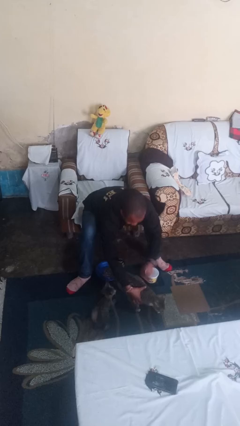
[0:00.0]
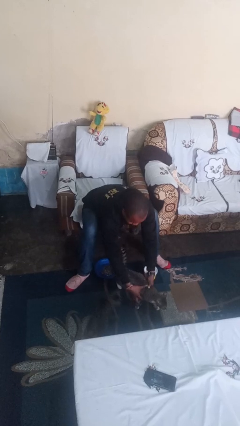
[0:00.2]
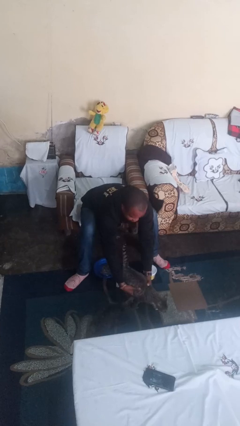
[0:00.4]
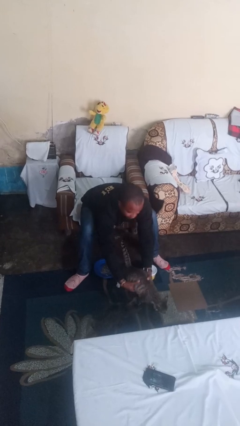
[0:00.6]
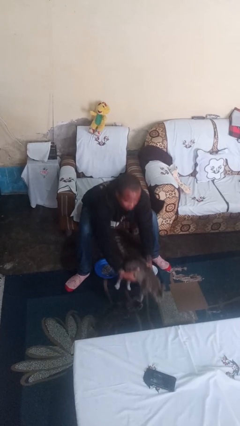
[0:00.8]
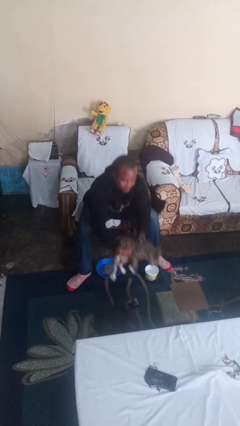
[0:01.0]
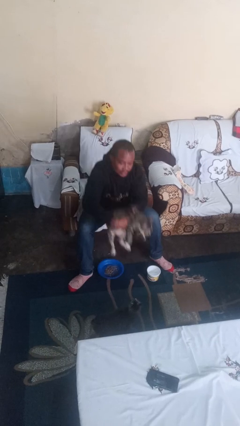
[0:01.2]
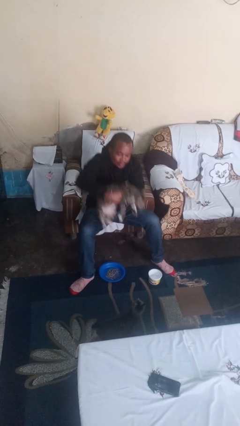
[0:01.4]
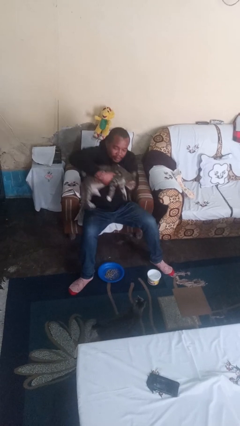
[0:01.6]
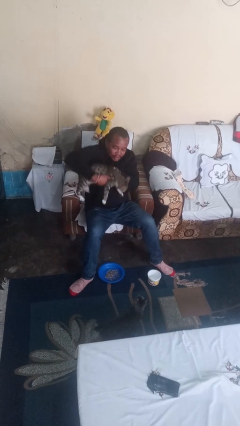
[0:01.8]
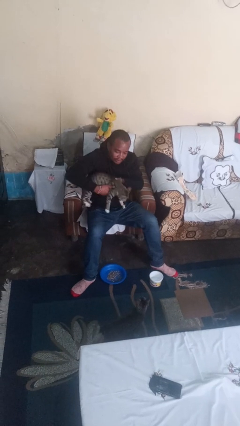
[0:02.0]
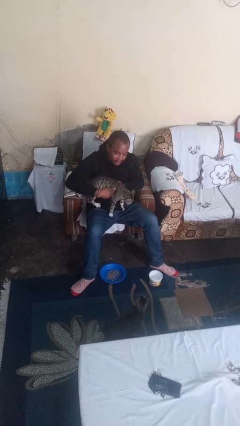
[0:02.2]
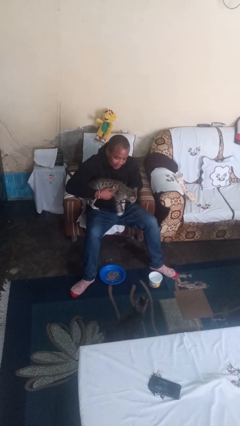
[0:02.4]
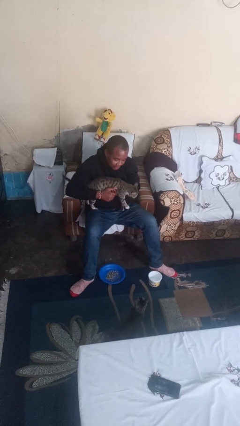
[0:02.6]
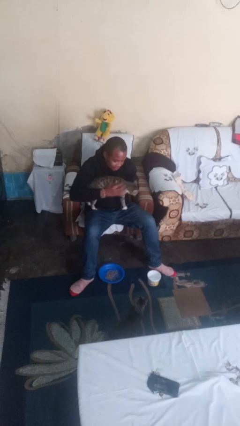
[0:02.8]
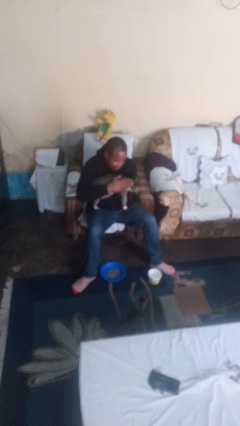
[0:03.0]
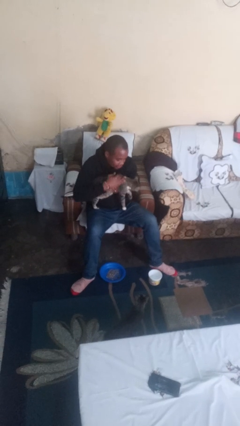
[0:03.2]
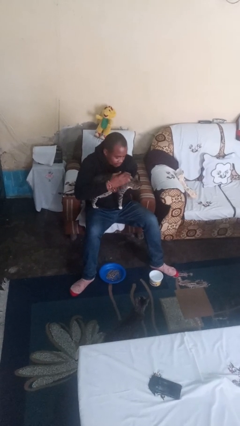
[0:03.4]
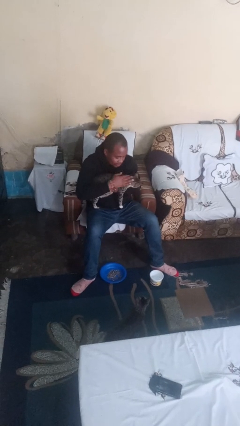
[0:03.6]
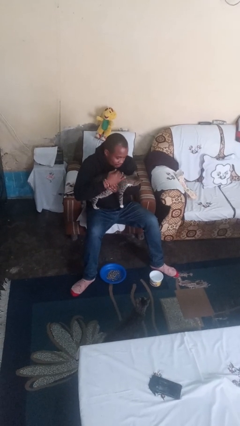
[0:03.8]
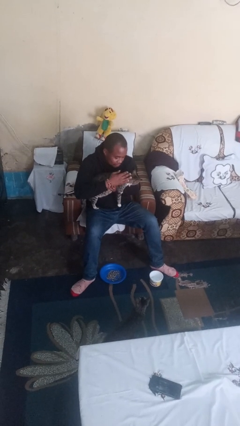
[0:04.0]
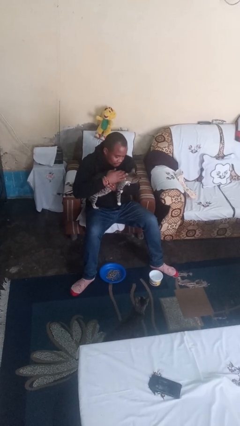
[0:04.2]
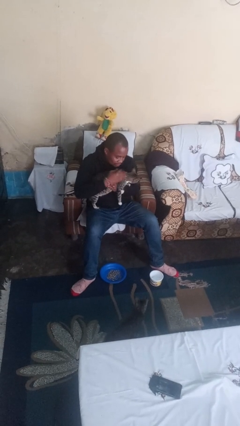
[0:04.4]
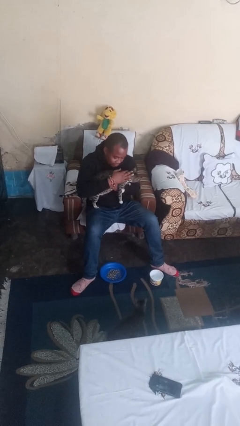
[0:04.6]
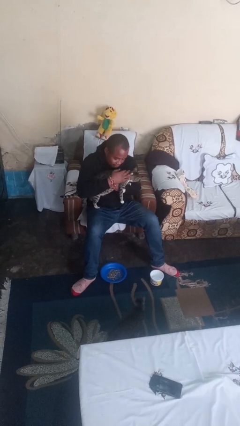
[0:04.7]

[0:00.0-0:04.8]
person hugs cat

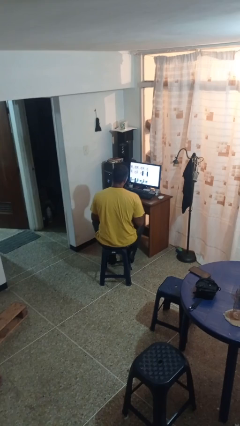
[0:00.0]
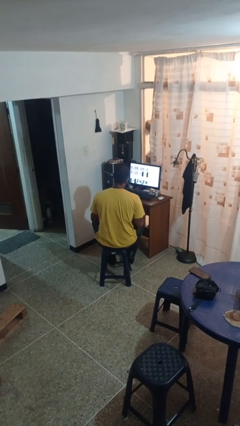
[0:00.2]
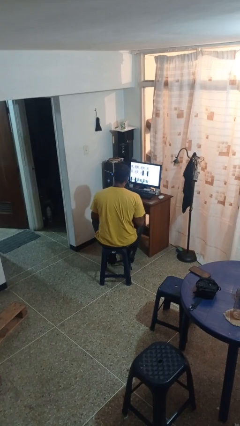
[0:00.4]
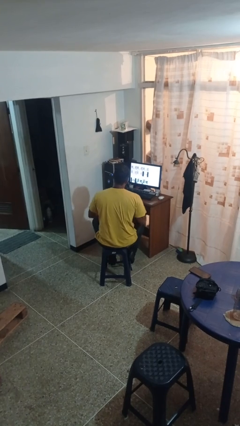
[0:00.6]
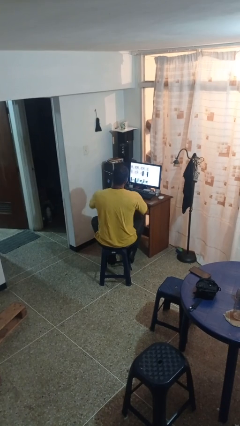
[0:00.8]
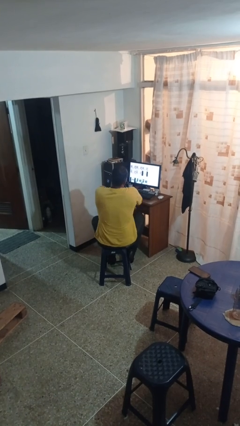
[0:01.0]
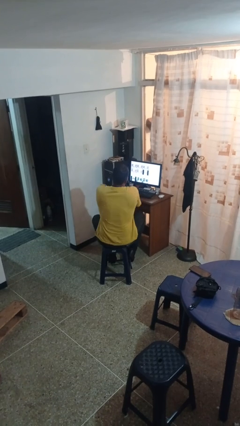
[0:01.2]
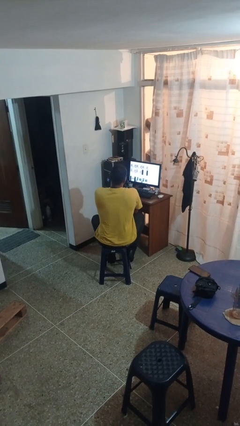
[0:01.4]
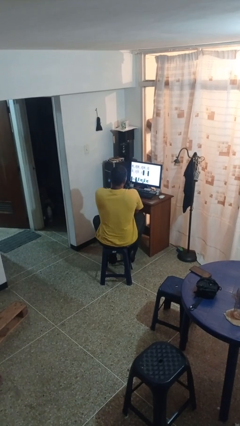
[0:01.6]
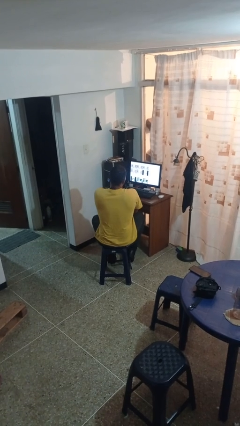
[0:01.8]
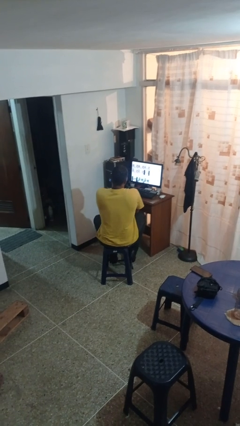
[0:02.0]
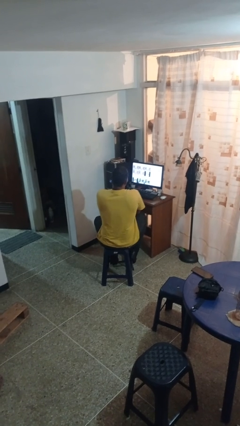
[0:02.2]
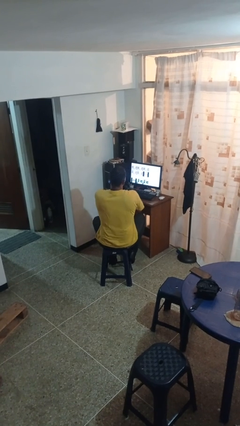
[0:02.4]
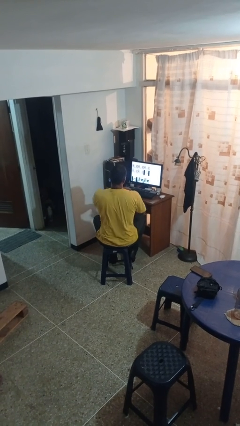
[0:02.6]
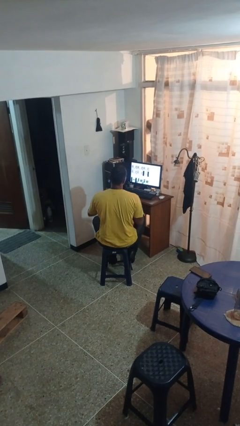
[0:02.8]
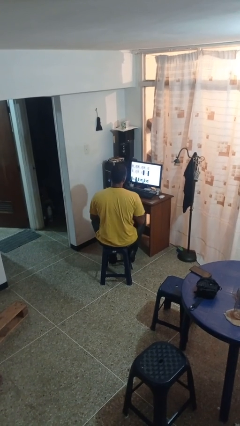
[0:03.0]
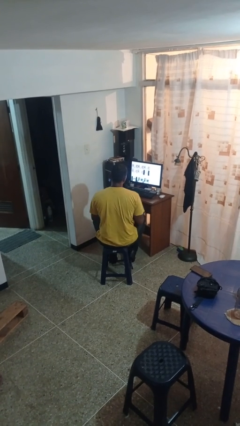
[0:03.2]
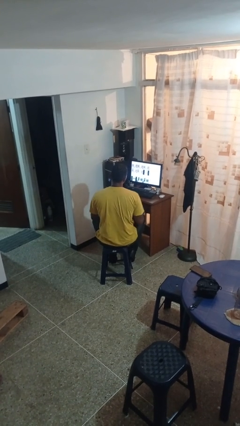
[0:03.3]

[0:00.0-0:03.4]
person crosses arms

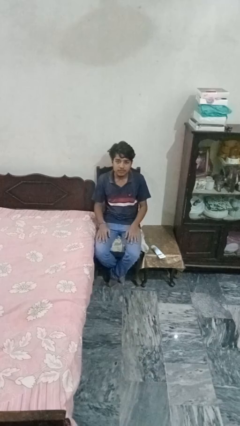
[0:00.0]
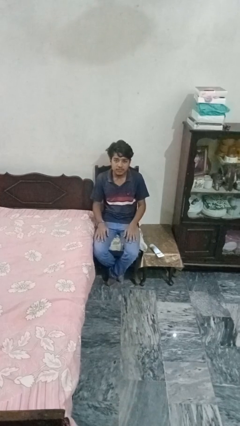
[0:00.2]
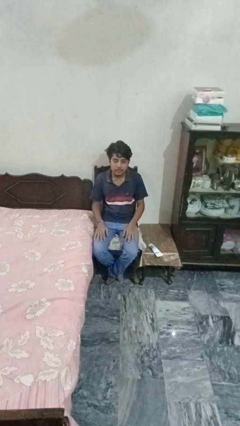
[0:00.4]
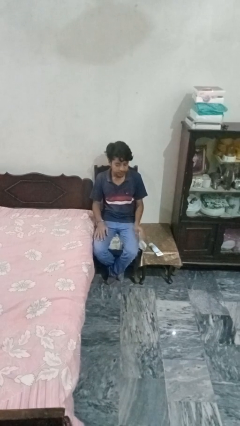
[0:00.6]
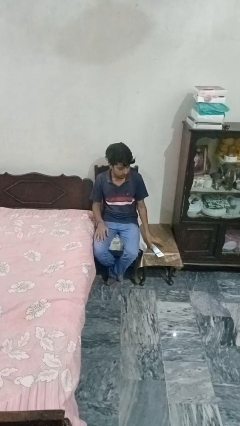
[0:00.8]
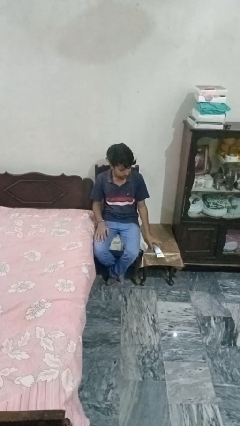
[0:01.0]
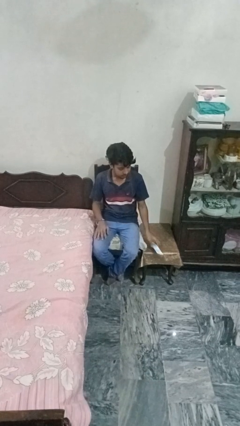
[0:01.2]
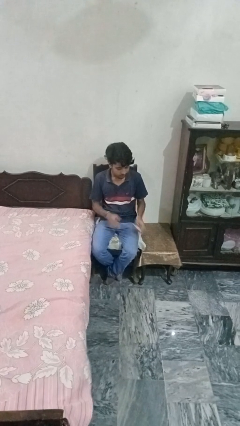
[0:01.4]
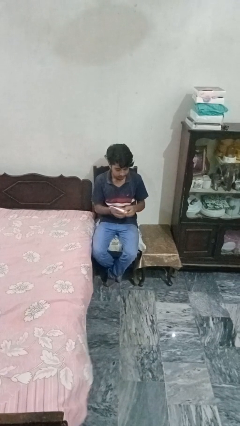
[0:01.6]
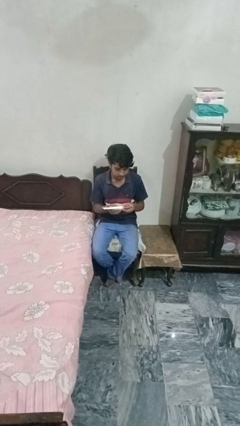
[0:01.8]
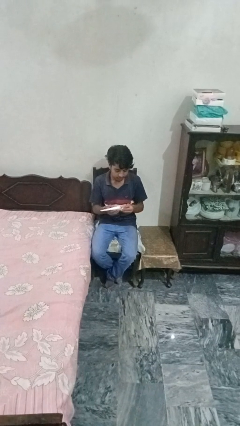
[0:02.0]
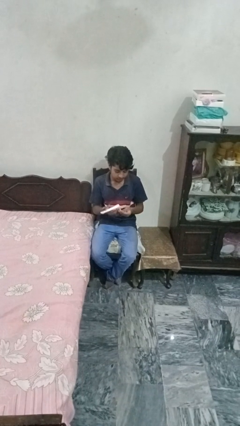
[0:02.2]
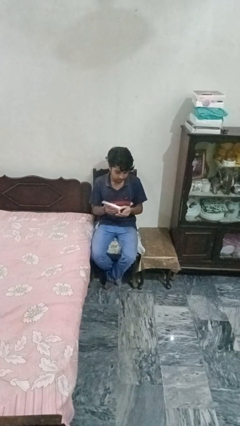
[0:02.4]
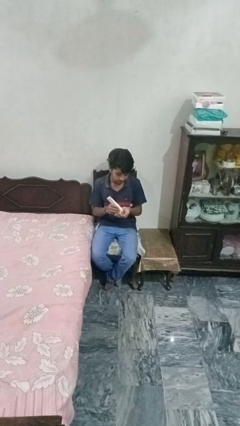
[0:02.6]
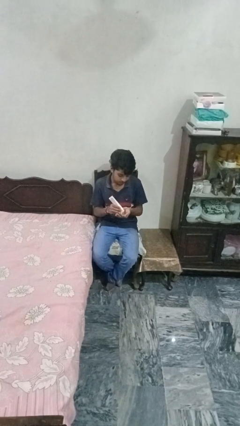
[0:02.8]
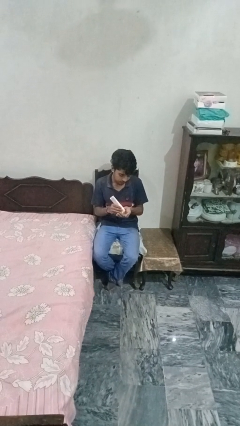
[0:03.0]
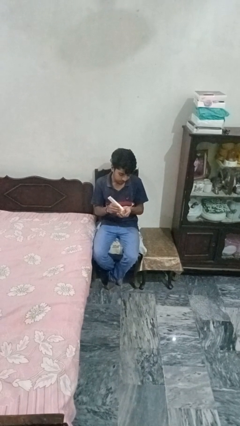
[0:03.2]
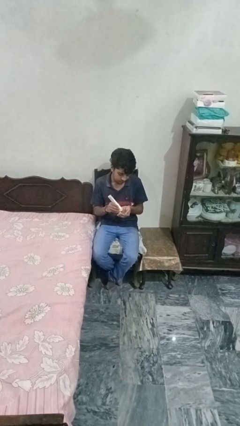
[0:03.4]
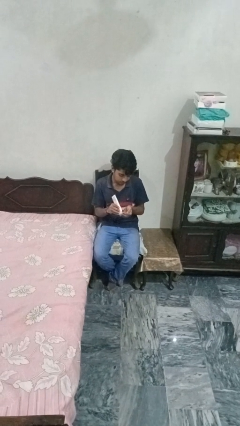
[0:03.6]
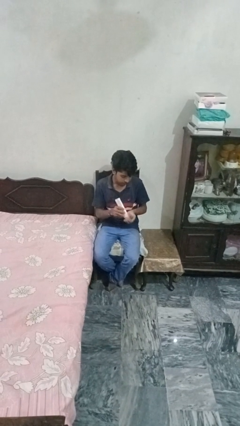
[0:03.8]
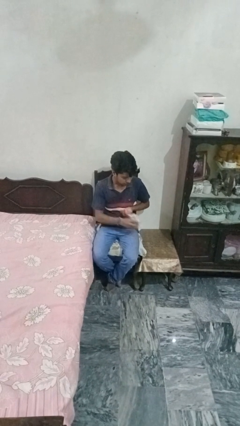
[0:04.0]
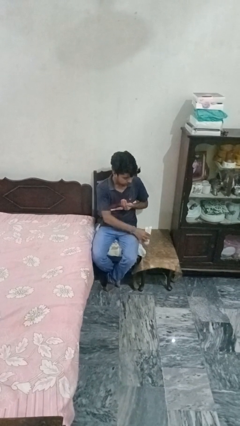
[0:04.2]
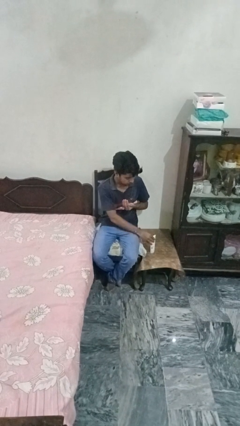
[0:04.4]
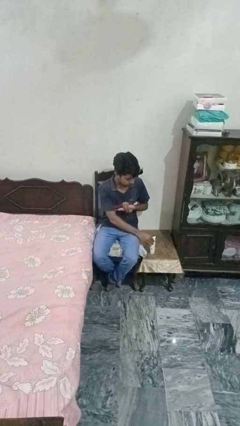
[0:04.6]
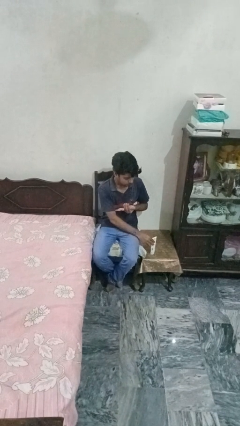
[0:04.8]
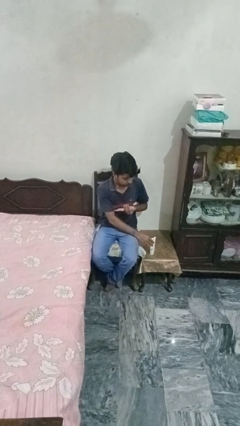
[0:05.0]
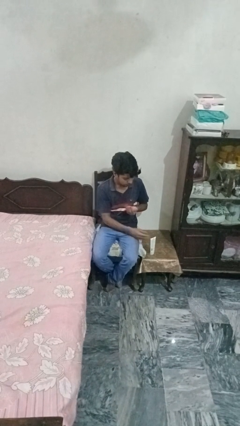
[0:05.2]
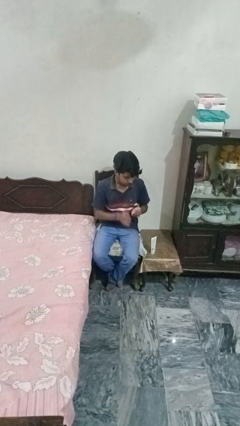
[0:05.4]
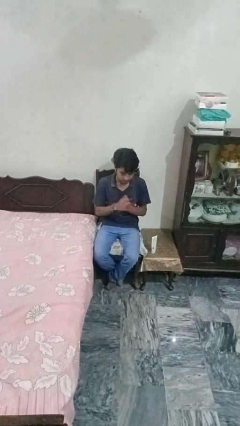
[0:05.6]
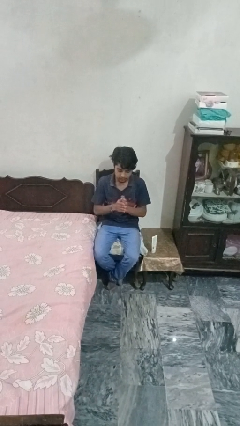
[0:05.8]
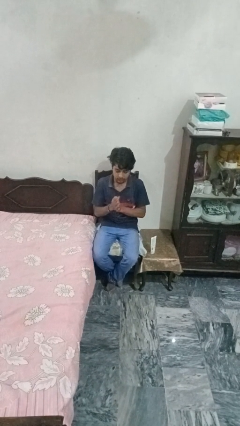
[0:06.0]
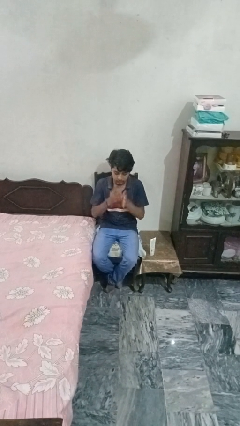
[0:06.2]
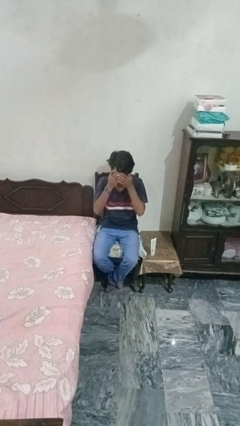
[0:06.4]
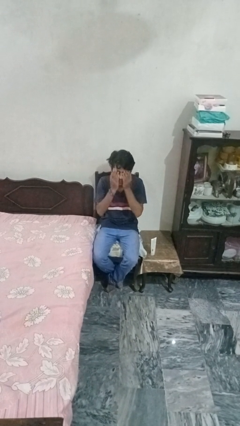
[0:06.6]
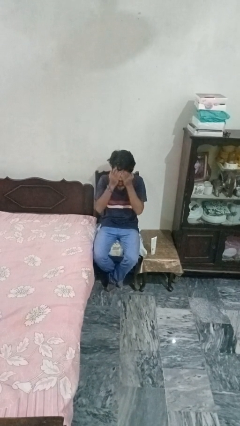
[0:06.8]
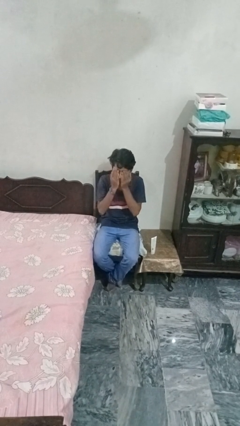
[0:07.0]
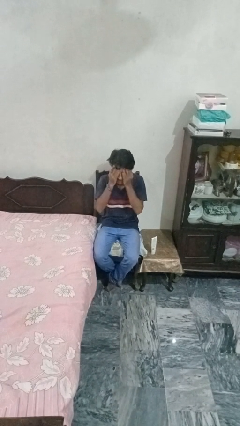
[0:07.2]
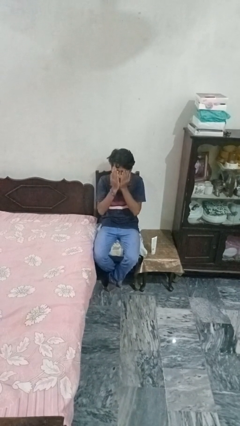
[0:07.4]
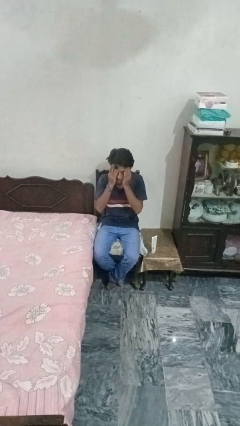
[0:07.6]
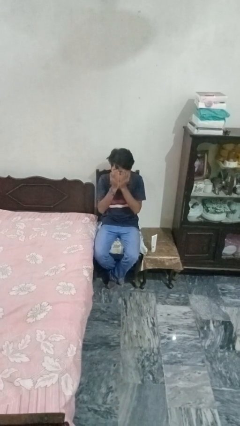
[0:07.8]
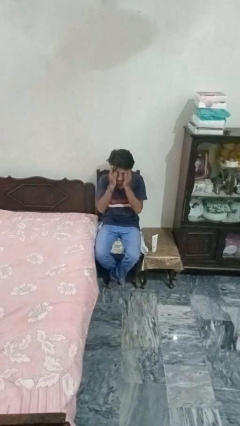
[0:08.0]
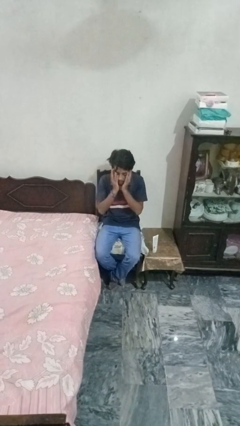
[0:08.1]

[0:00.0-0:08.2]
person applies facial moisturizer

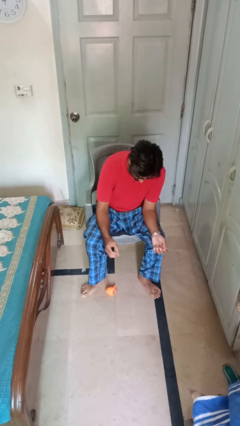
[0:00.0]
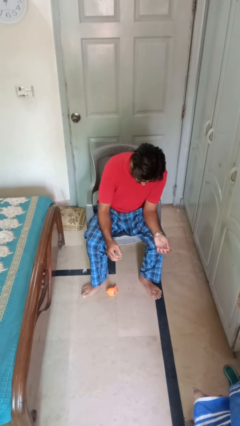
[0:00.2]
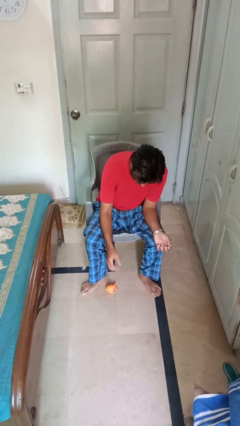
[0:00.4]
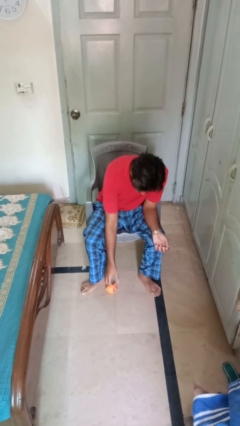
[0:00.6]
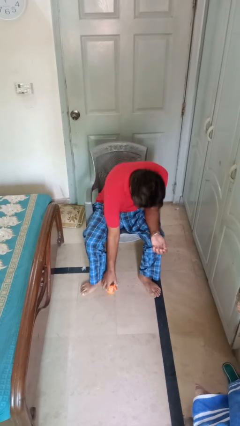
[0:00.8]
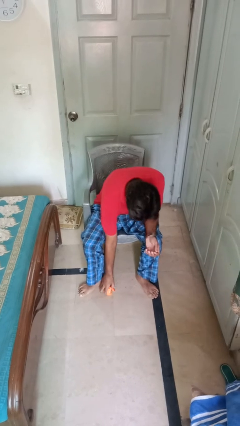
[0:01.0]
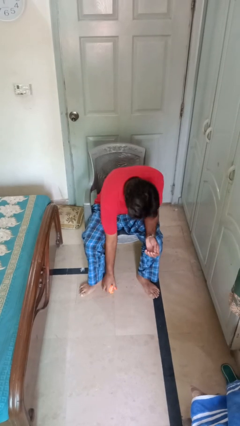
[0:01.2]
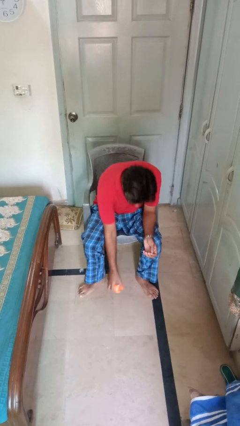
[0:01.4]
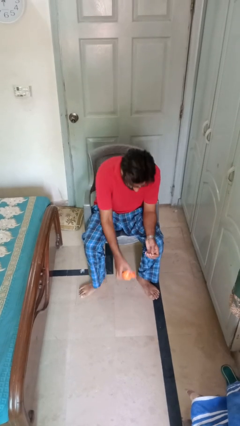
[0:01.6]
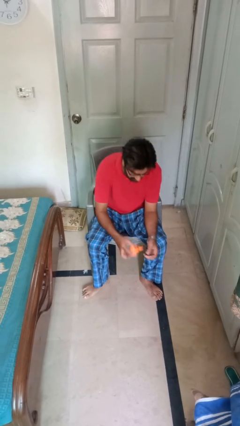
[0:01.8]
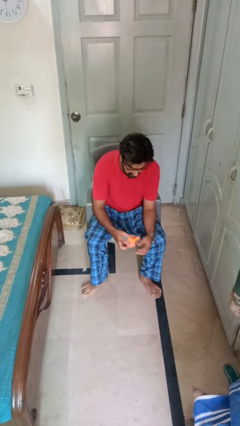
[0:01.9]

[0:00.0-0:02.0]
person picks up object from floor
